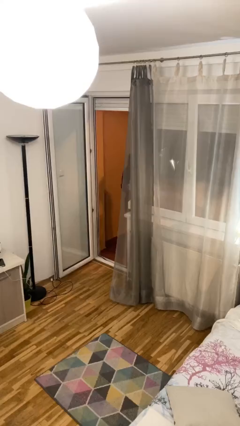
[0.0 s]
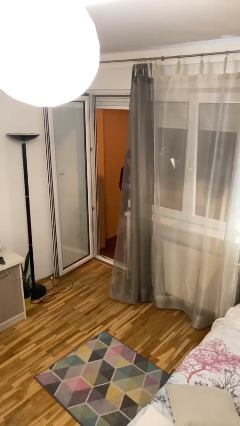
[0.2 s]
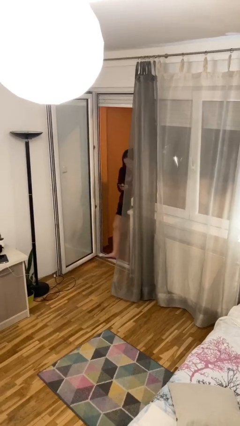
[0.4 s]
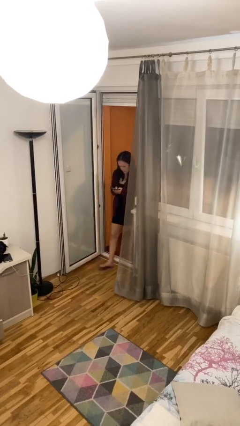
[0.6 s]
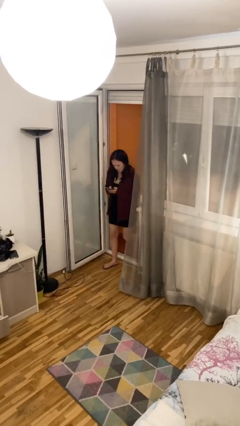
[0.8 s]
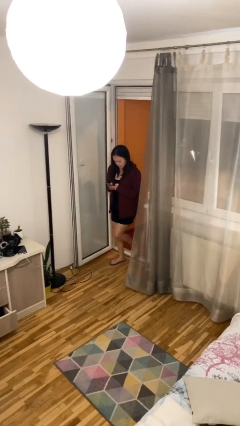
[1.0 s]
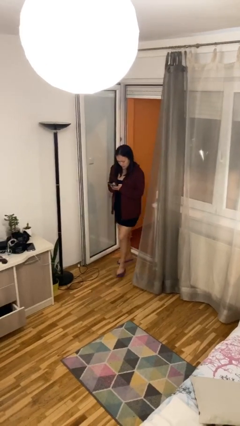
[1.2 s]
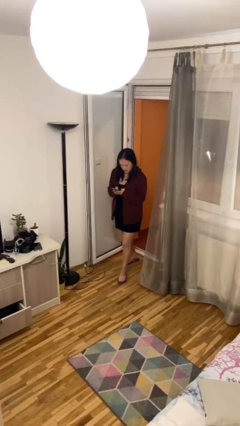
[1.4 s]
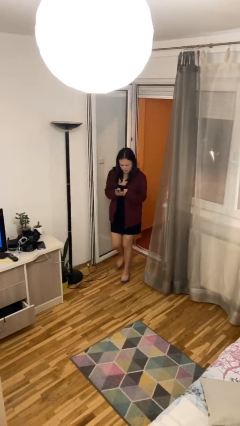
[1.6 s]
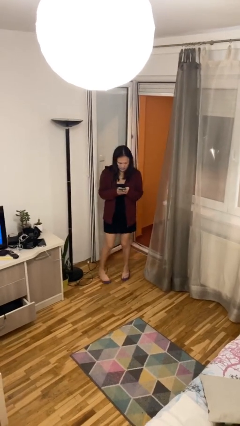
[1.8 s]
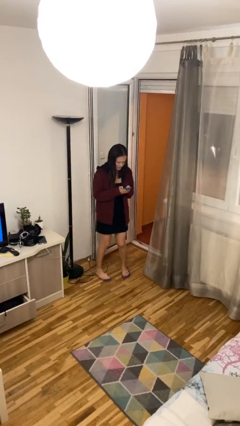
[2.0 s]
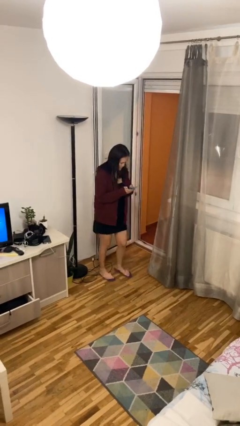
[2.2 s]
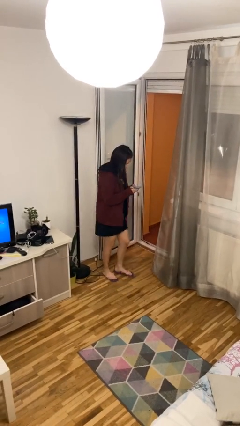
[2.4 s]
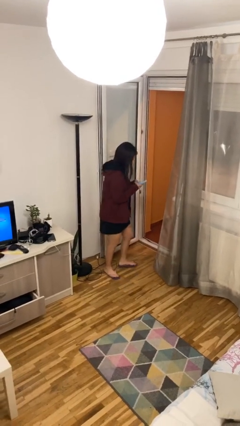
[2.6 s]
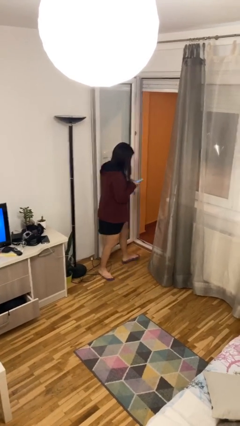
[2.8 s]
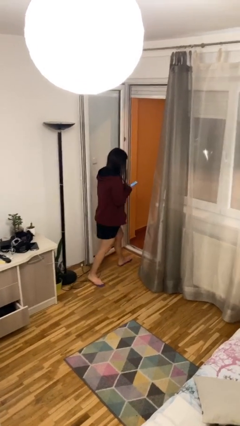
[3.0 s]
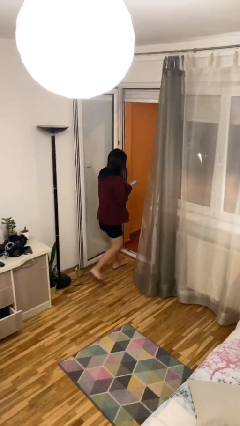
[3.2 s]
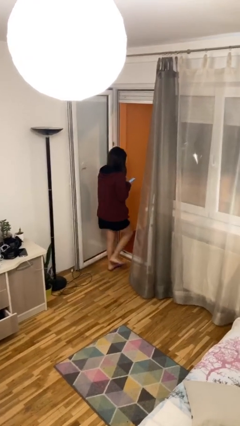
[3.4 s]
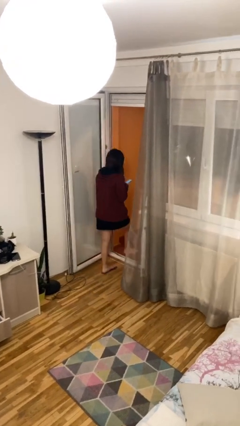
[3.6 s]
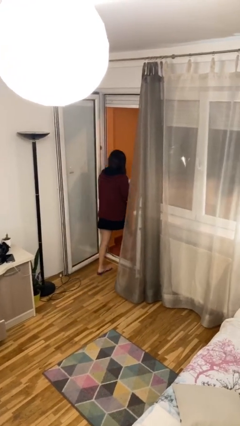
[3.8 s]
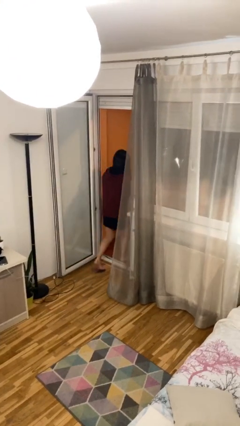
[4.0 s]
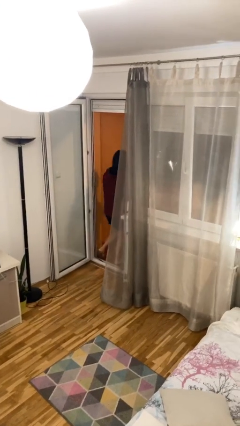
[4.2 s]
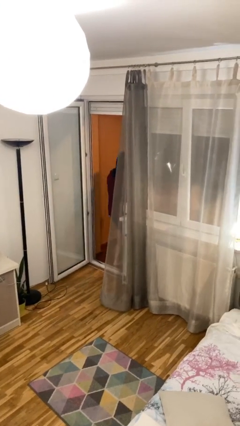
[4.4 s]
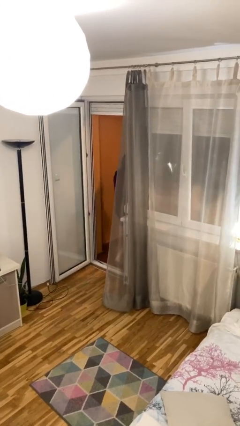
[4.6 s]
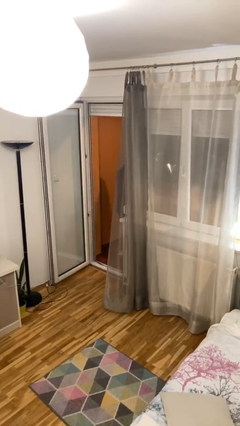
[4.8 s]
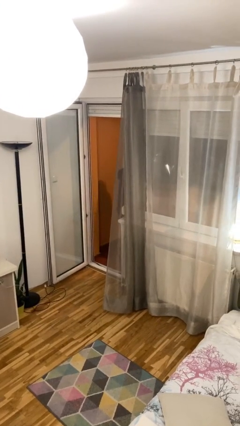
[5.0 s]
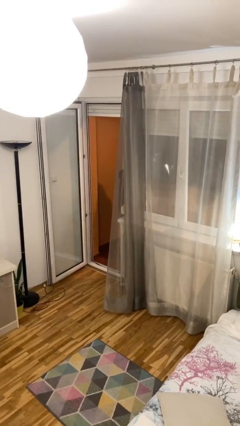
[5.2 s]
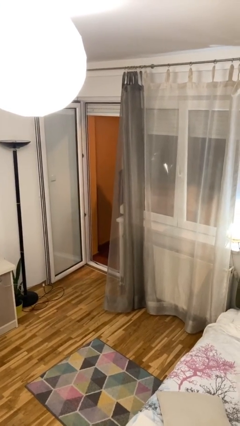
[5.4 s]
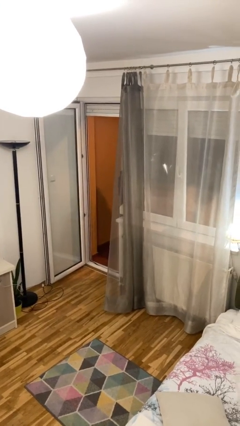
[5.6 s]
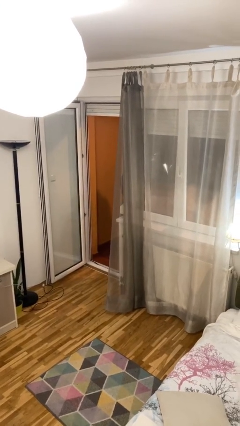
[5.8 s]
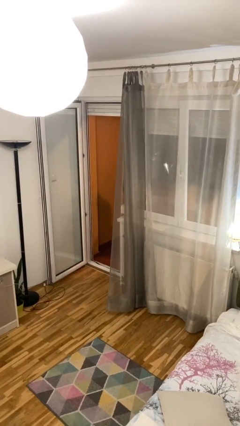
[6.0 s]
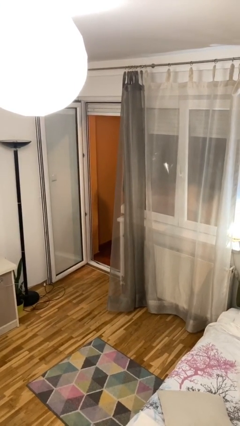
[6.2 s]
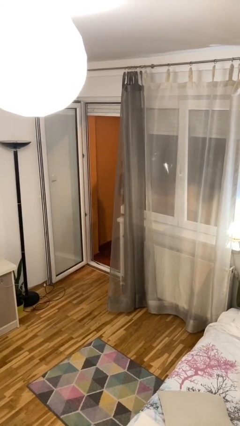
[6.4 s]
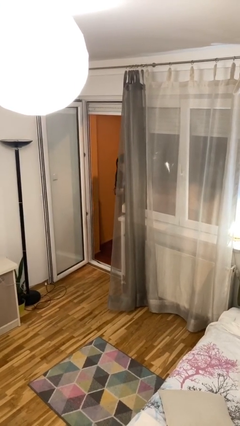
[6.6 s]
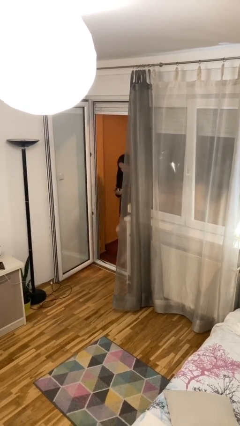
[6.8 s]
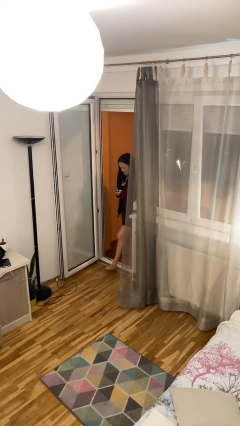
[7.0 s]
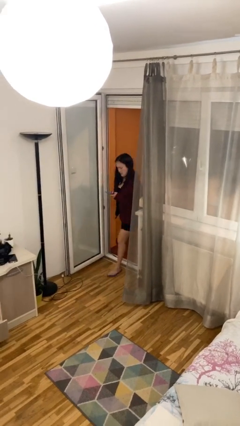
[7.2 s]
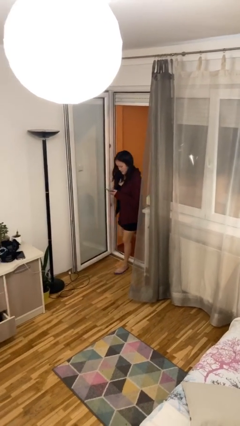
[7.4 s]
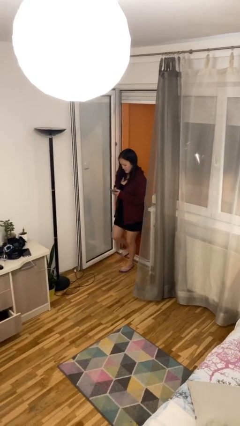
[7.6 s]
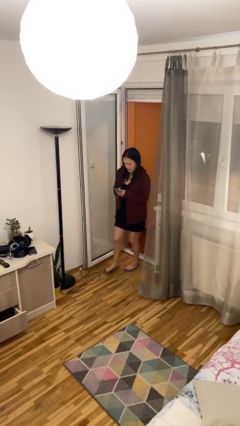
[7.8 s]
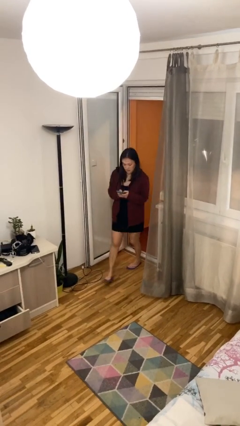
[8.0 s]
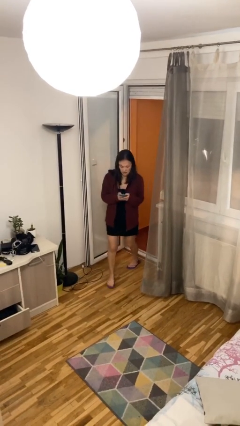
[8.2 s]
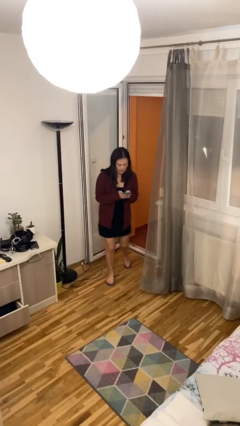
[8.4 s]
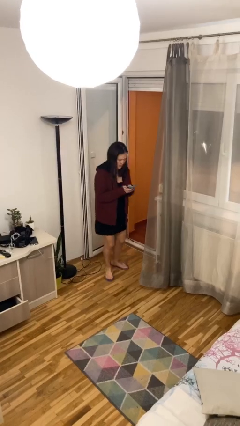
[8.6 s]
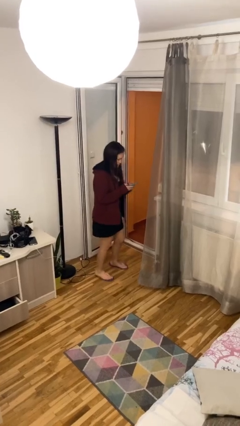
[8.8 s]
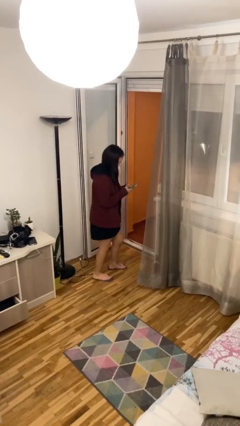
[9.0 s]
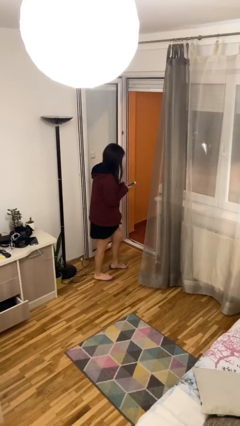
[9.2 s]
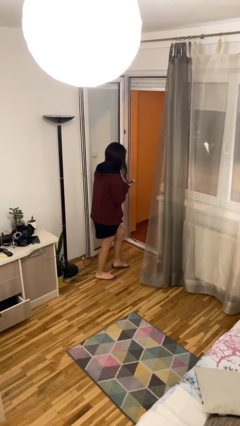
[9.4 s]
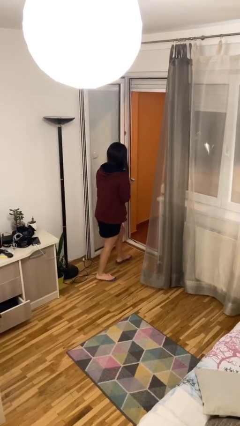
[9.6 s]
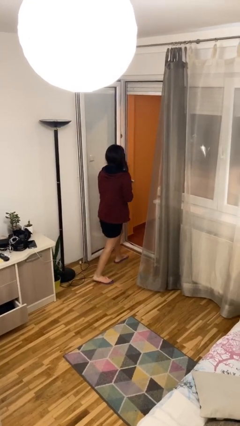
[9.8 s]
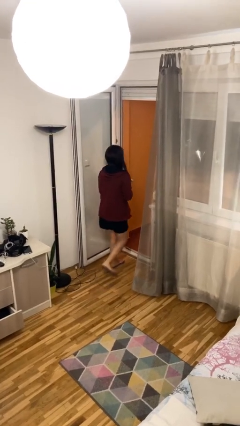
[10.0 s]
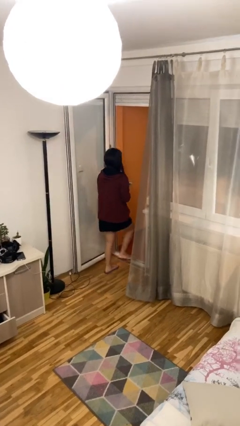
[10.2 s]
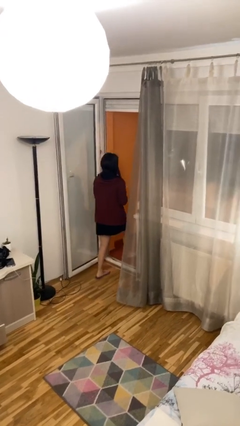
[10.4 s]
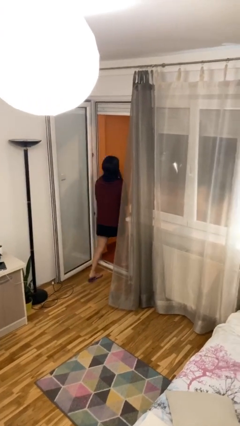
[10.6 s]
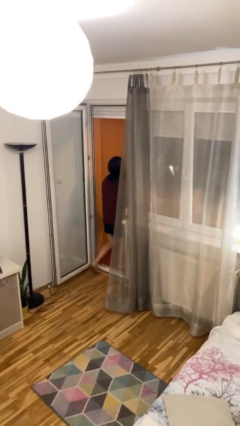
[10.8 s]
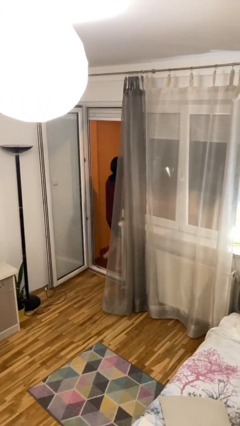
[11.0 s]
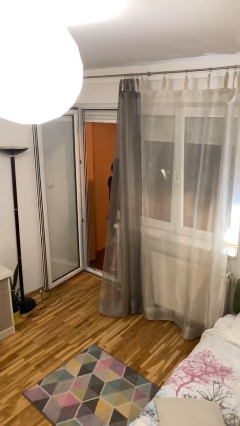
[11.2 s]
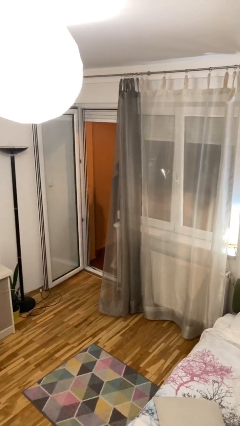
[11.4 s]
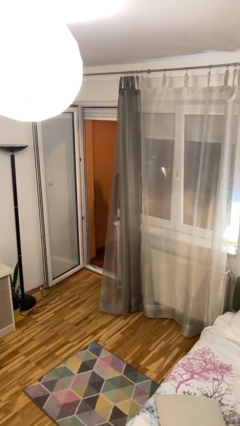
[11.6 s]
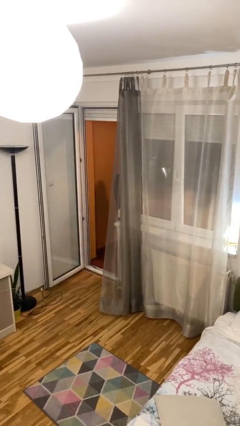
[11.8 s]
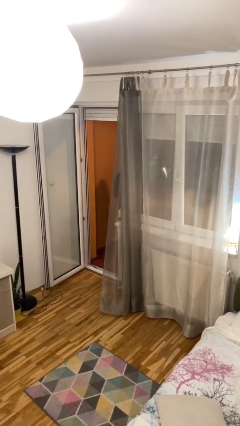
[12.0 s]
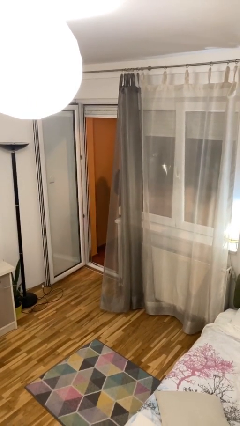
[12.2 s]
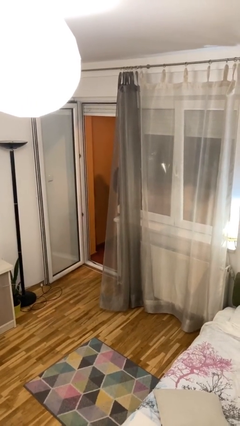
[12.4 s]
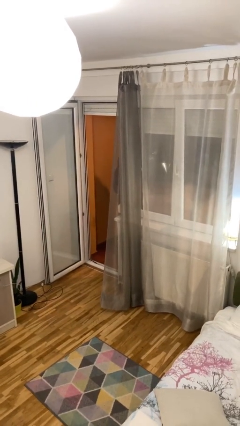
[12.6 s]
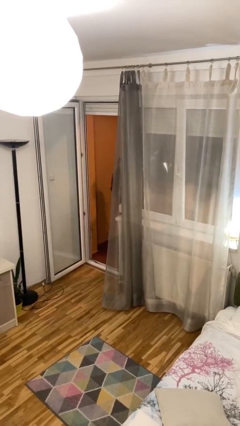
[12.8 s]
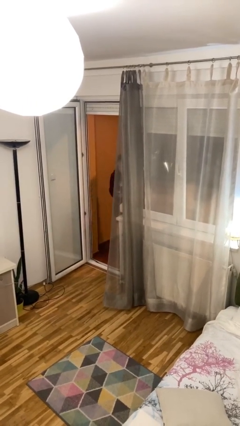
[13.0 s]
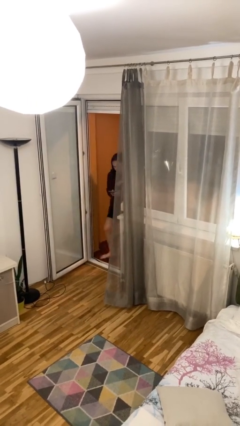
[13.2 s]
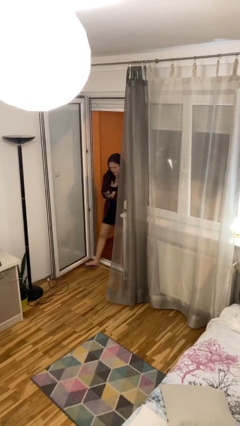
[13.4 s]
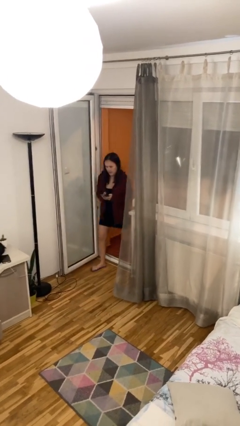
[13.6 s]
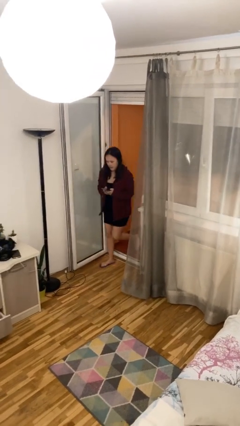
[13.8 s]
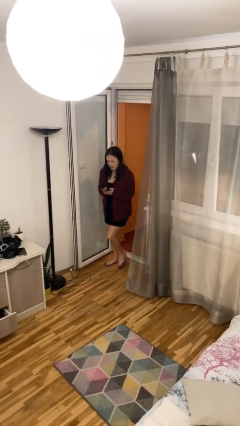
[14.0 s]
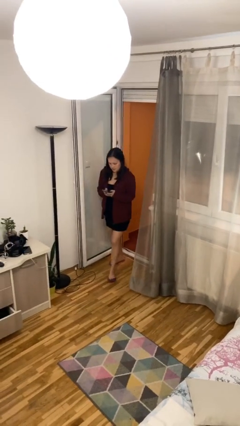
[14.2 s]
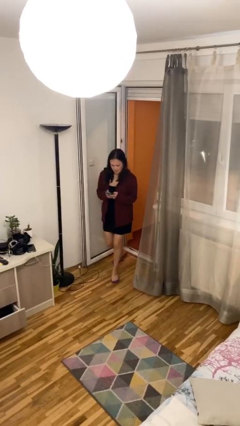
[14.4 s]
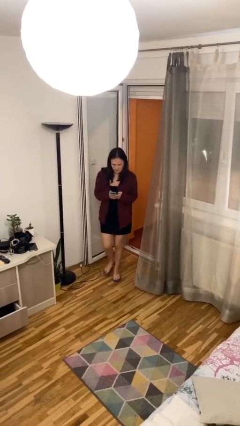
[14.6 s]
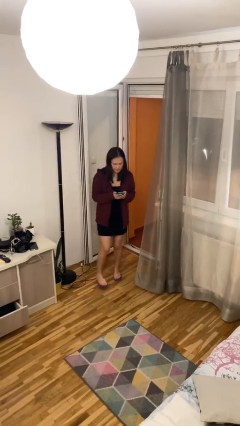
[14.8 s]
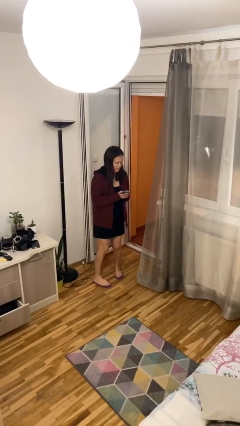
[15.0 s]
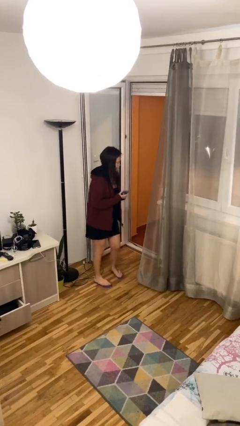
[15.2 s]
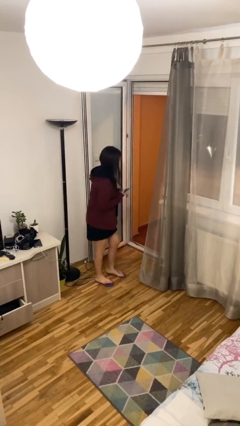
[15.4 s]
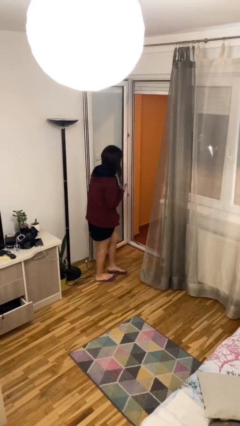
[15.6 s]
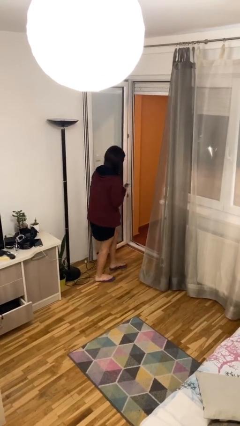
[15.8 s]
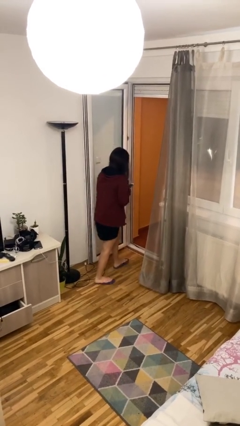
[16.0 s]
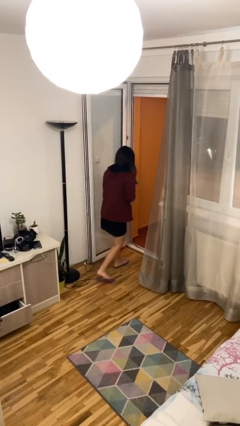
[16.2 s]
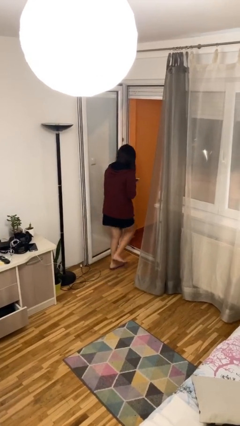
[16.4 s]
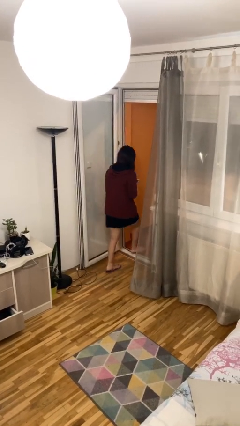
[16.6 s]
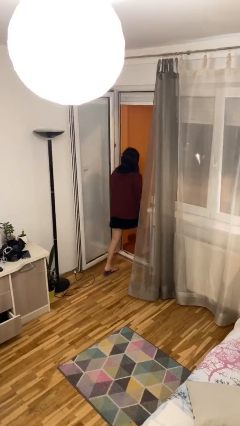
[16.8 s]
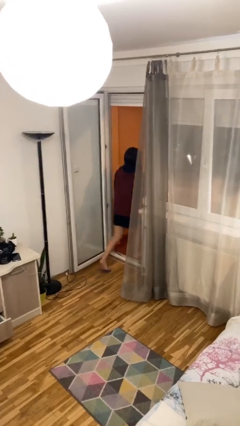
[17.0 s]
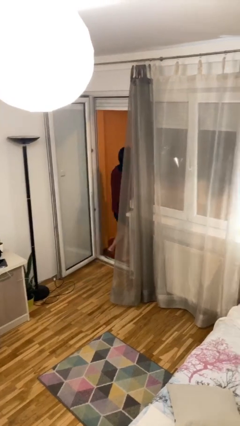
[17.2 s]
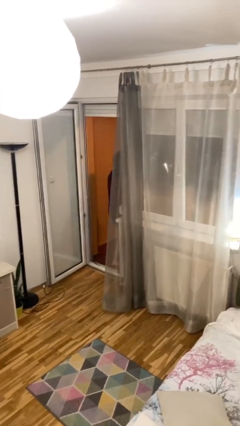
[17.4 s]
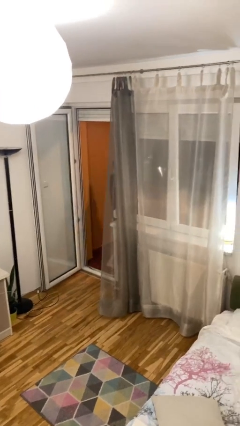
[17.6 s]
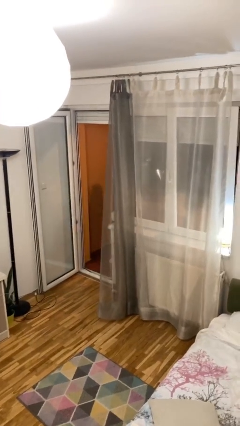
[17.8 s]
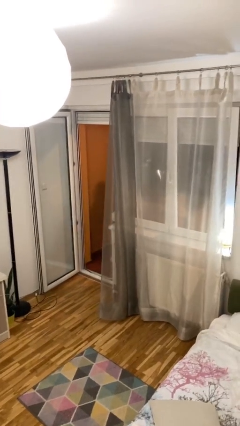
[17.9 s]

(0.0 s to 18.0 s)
person texts on phone
